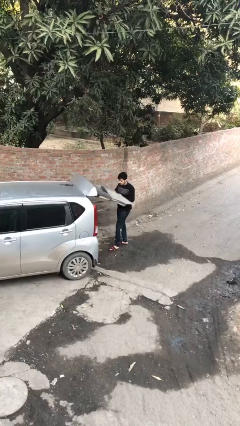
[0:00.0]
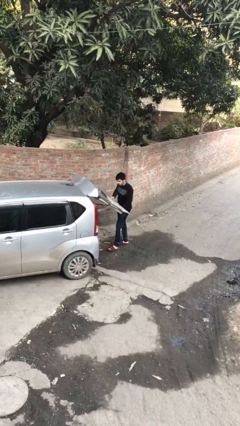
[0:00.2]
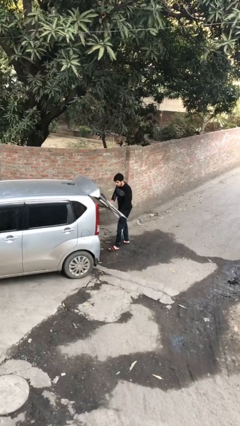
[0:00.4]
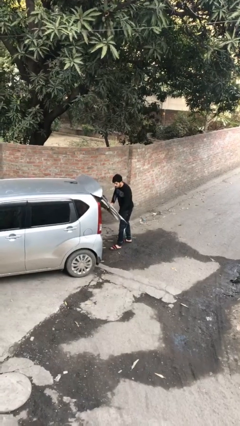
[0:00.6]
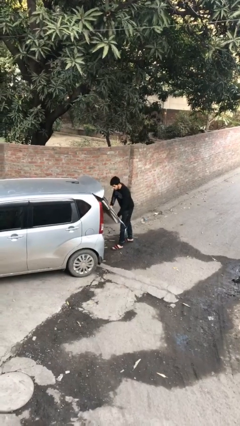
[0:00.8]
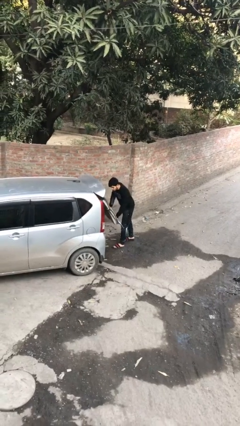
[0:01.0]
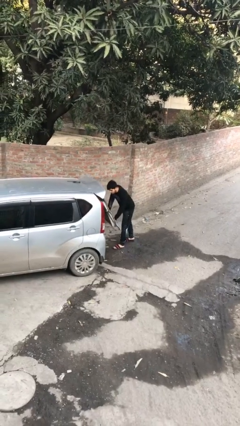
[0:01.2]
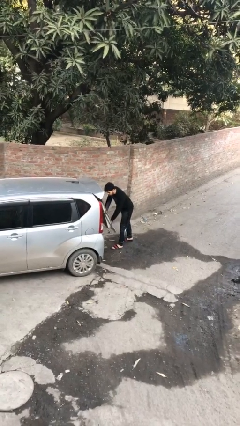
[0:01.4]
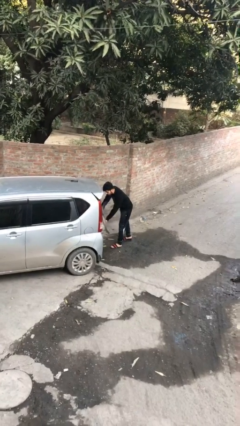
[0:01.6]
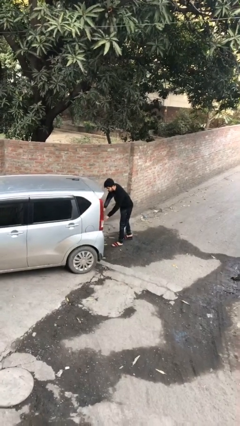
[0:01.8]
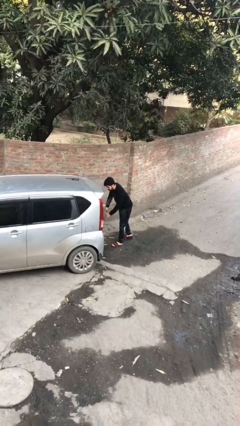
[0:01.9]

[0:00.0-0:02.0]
person closes car trunk

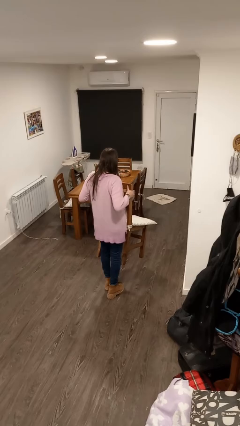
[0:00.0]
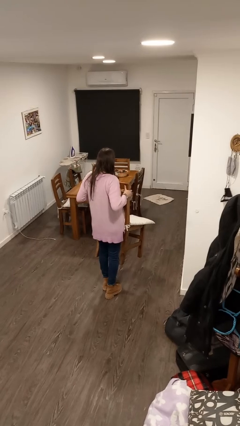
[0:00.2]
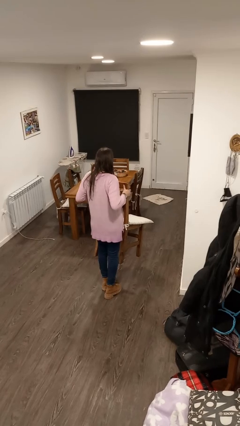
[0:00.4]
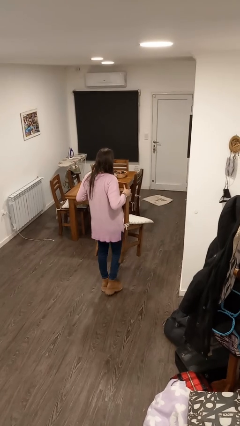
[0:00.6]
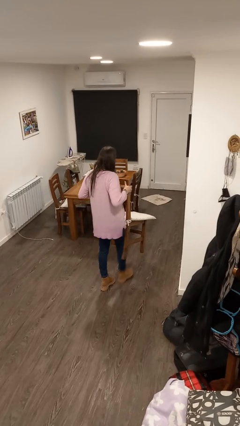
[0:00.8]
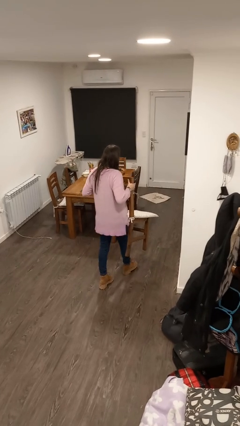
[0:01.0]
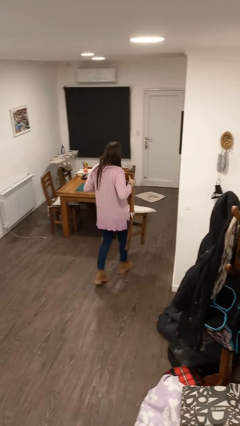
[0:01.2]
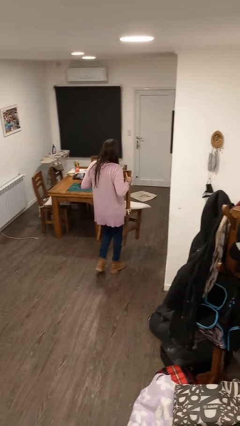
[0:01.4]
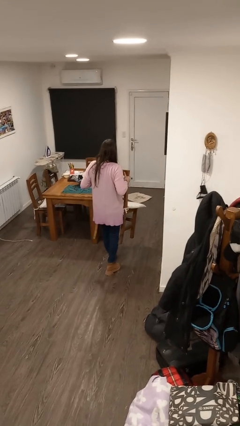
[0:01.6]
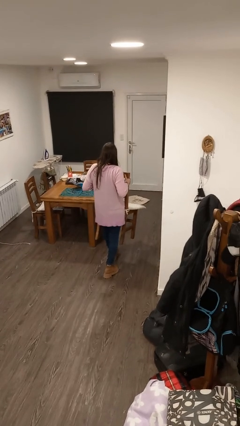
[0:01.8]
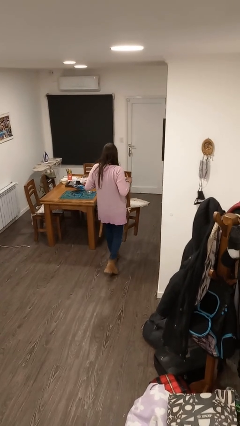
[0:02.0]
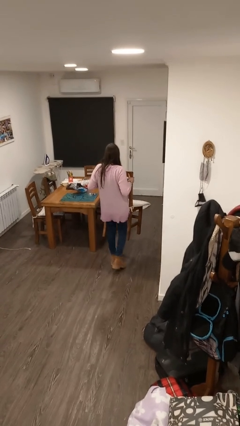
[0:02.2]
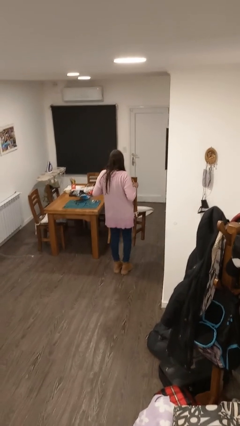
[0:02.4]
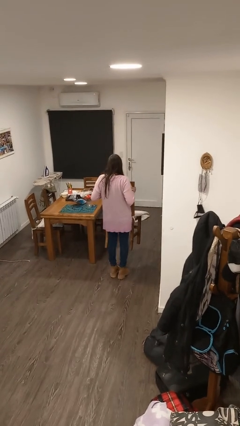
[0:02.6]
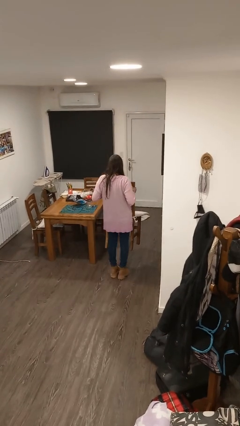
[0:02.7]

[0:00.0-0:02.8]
person carries furniture

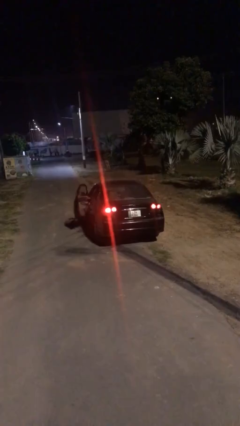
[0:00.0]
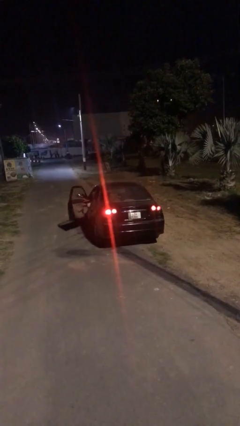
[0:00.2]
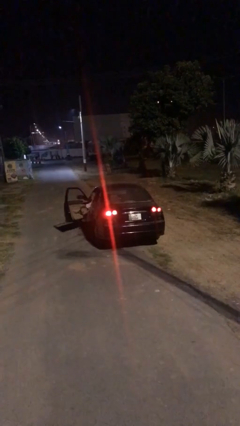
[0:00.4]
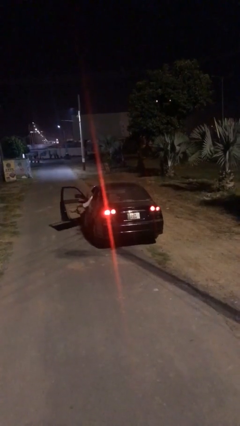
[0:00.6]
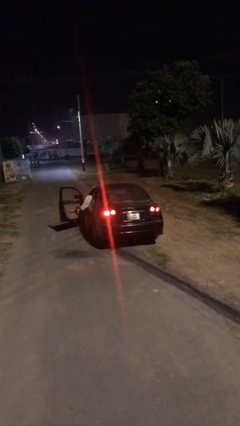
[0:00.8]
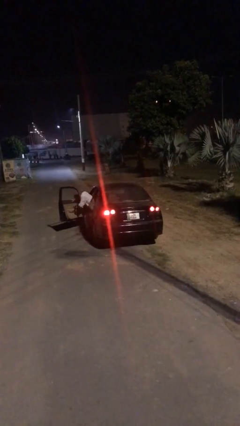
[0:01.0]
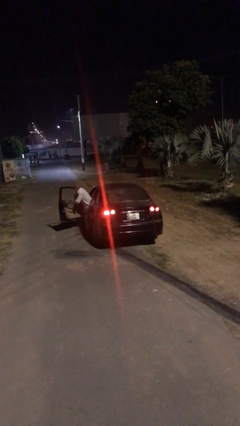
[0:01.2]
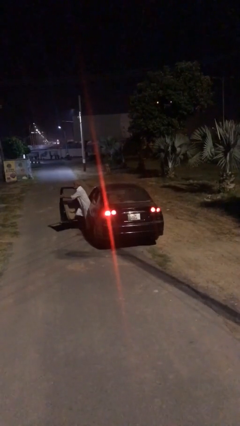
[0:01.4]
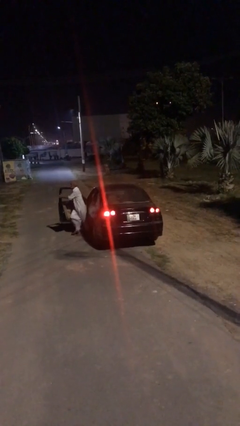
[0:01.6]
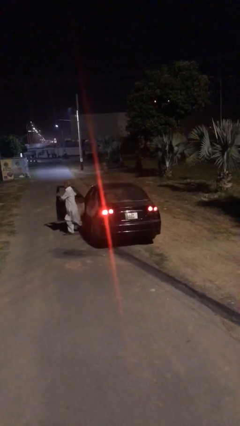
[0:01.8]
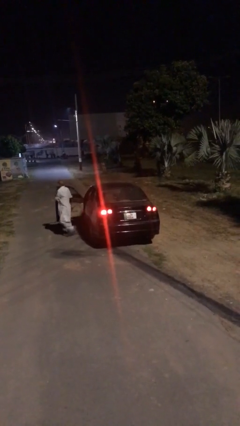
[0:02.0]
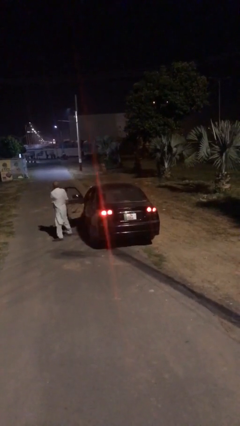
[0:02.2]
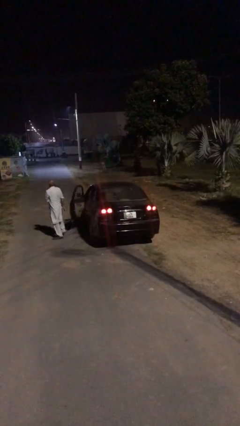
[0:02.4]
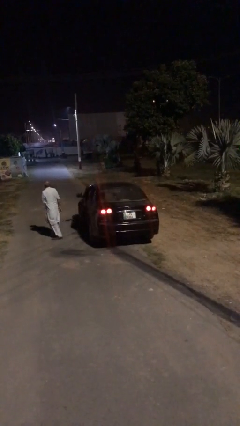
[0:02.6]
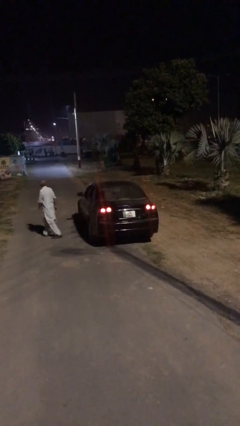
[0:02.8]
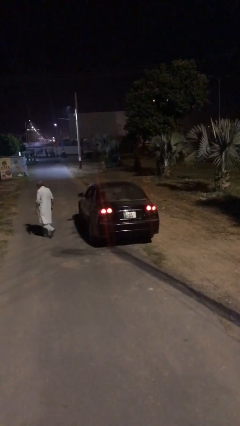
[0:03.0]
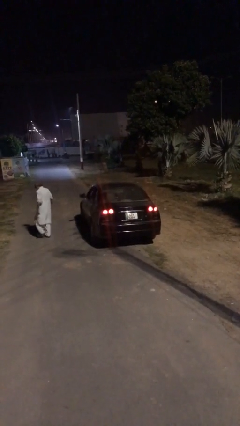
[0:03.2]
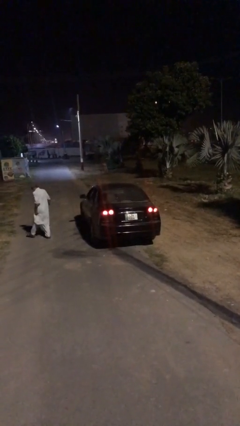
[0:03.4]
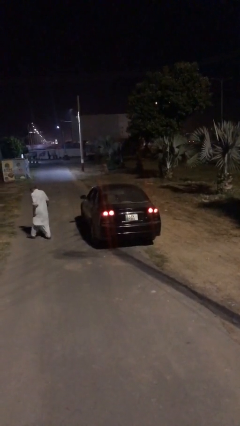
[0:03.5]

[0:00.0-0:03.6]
car drops off person

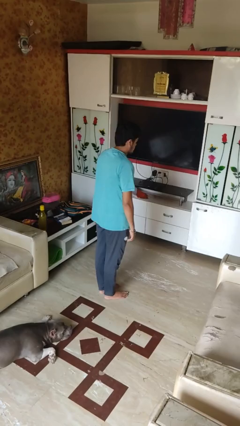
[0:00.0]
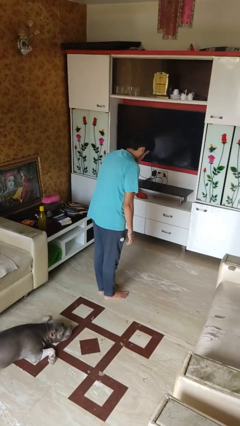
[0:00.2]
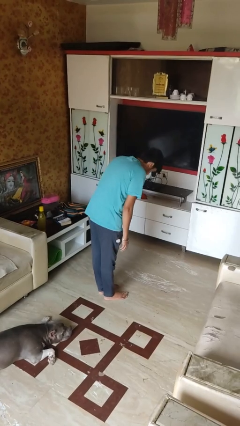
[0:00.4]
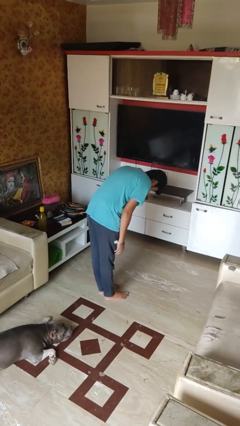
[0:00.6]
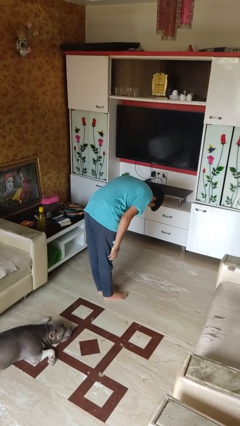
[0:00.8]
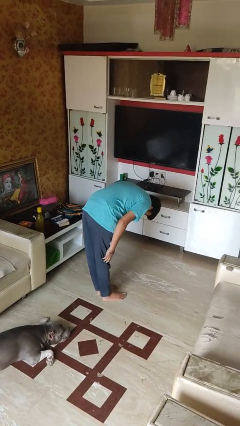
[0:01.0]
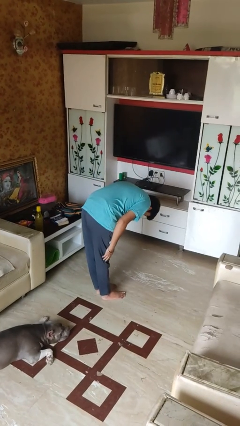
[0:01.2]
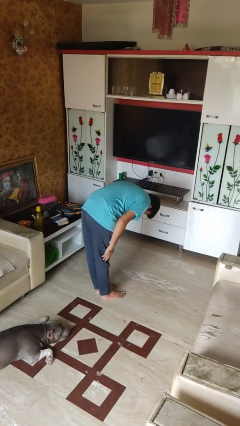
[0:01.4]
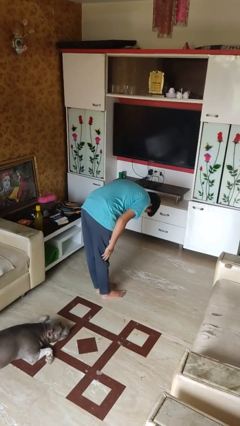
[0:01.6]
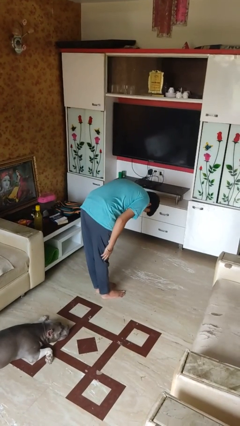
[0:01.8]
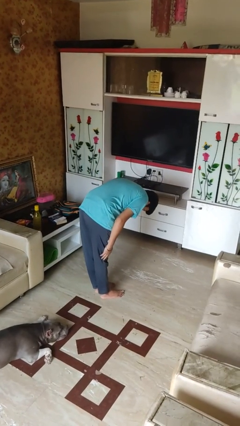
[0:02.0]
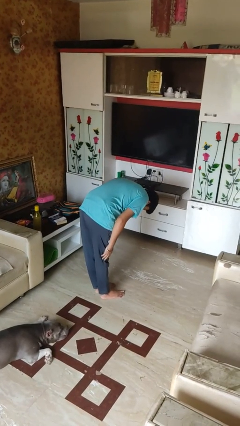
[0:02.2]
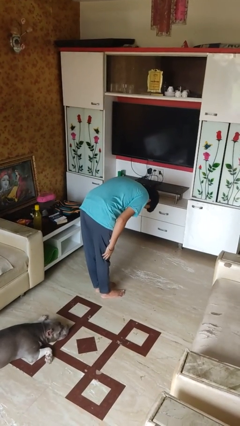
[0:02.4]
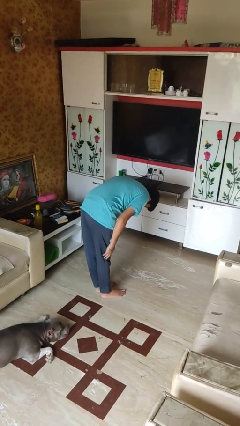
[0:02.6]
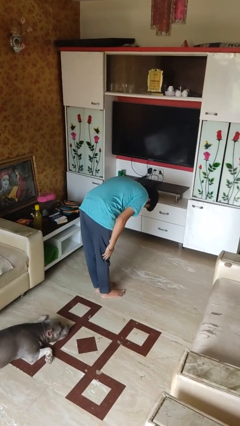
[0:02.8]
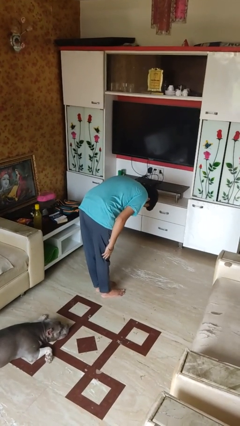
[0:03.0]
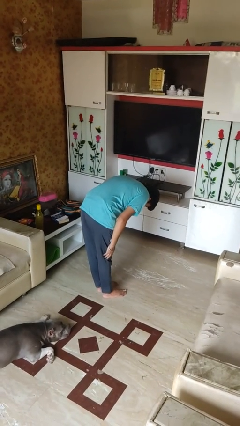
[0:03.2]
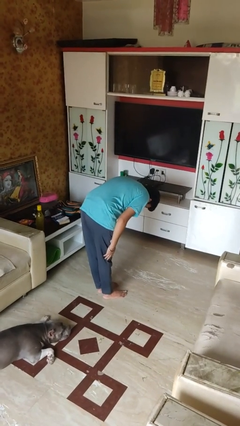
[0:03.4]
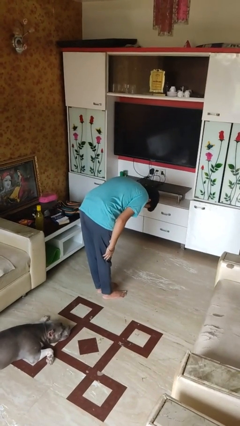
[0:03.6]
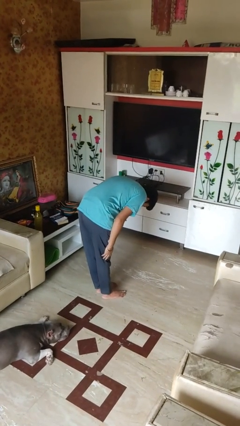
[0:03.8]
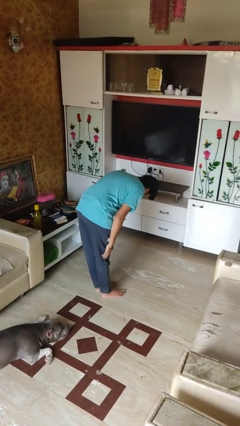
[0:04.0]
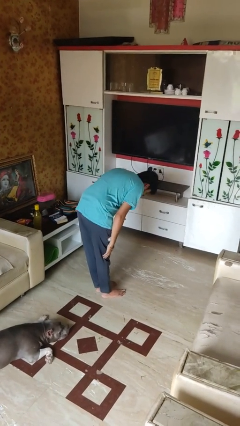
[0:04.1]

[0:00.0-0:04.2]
person bows

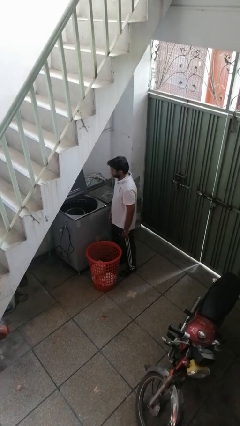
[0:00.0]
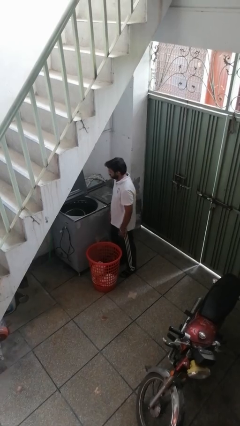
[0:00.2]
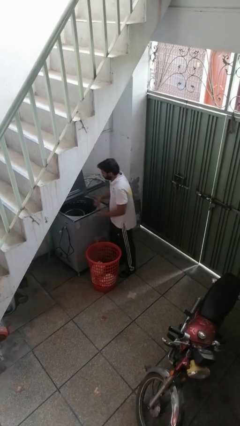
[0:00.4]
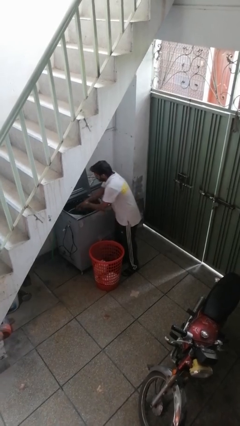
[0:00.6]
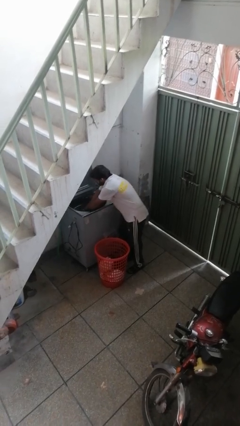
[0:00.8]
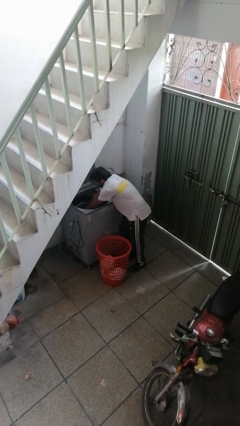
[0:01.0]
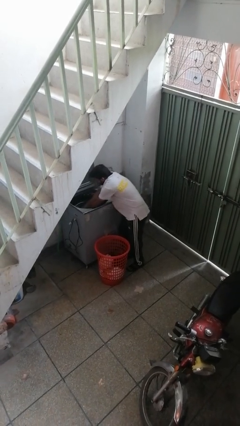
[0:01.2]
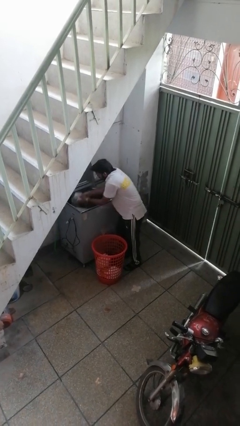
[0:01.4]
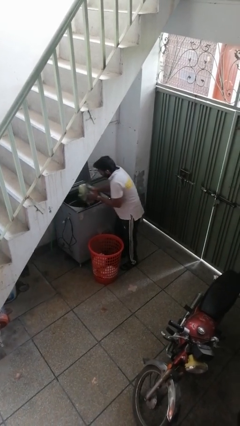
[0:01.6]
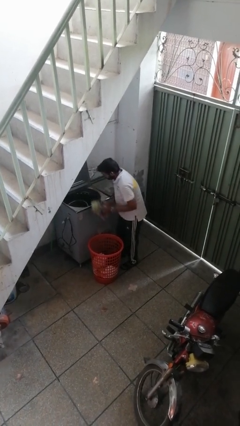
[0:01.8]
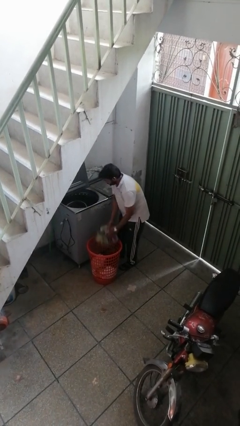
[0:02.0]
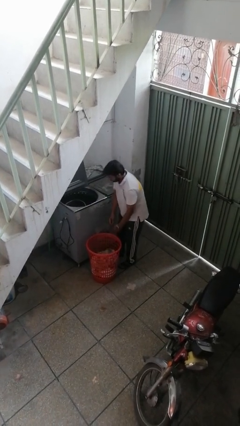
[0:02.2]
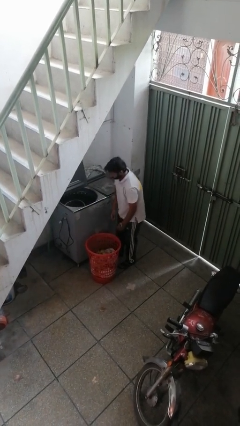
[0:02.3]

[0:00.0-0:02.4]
person loads clotheswasher

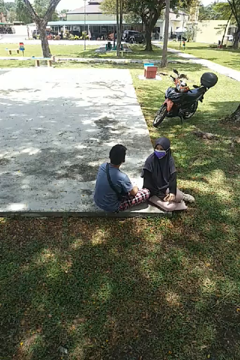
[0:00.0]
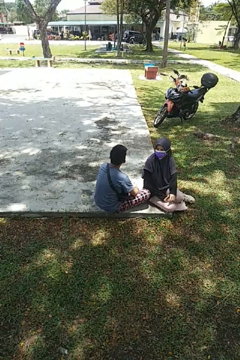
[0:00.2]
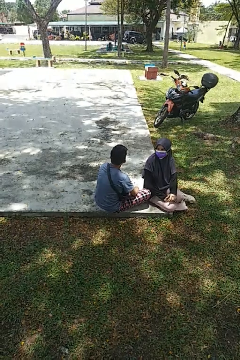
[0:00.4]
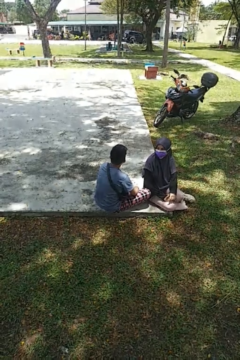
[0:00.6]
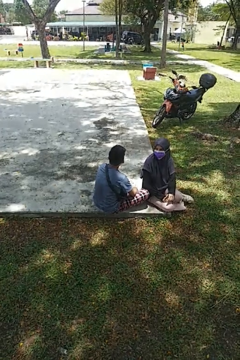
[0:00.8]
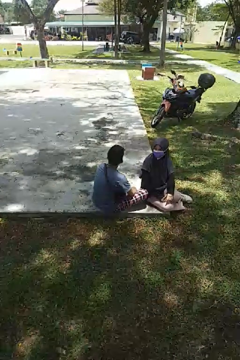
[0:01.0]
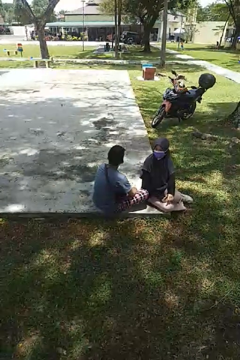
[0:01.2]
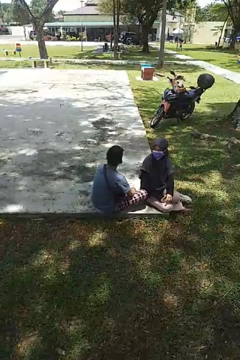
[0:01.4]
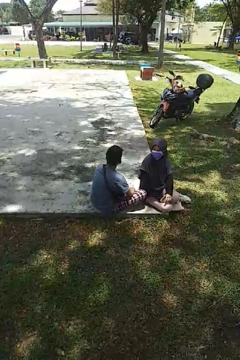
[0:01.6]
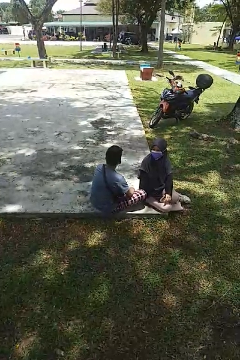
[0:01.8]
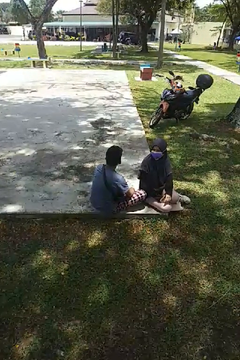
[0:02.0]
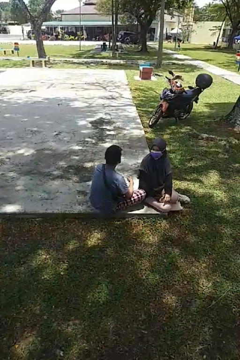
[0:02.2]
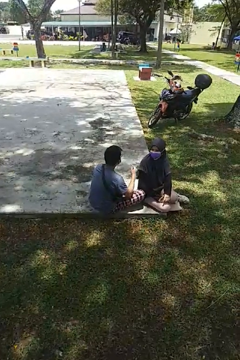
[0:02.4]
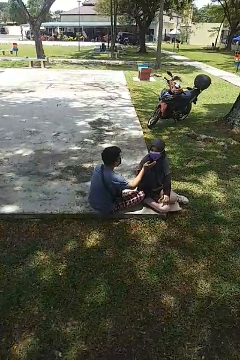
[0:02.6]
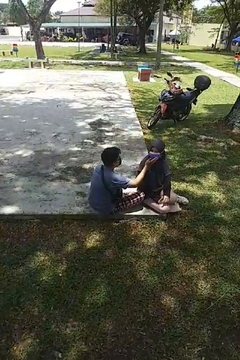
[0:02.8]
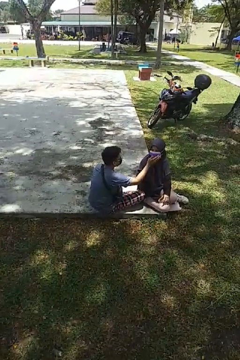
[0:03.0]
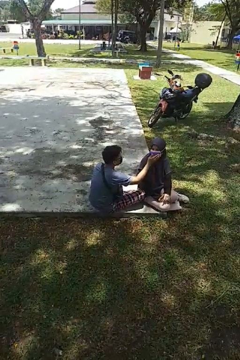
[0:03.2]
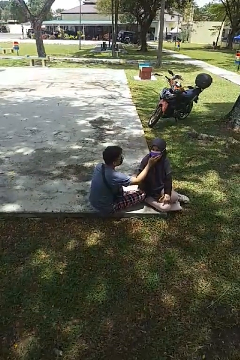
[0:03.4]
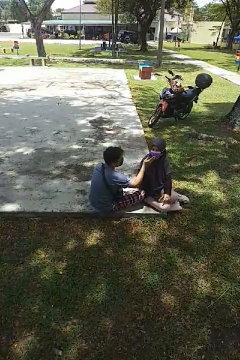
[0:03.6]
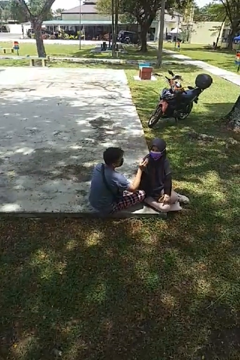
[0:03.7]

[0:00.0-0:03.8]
person touches face of person
